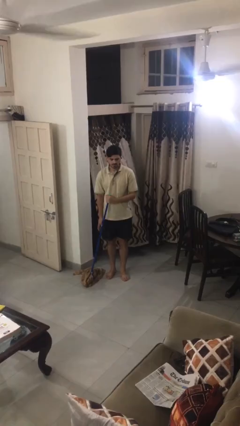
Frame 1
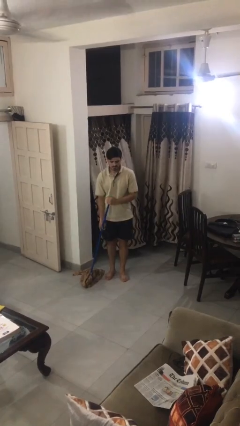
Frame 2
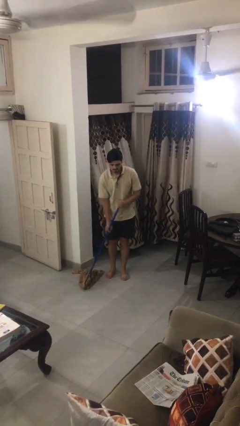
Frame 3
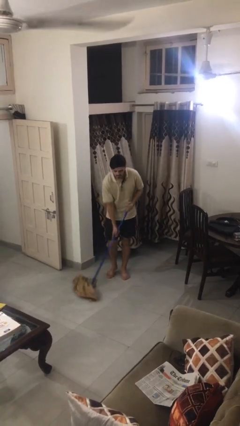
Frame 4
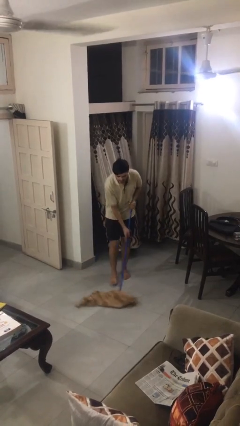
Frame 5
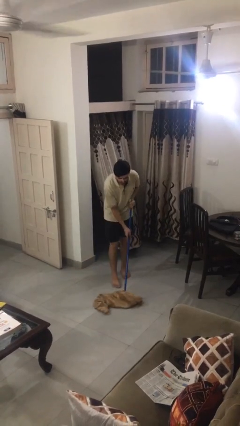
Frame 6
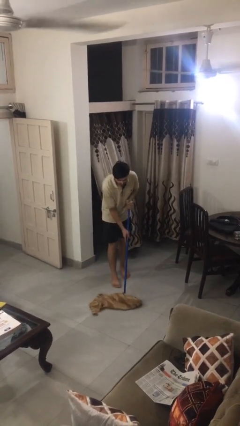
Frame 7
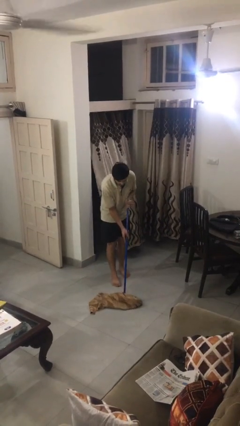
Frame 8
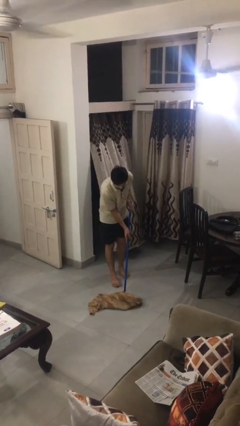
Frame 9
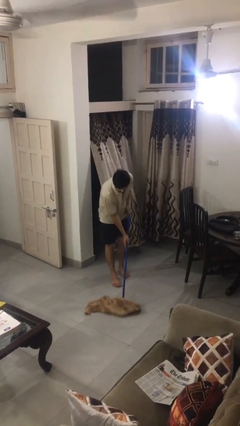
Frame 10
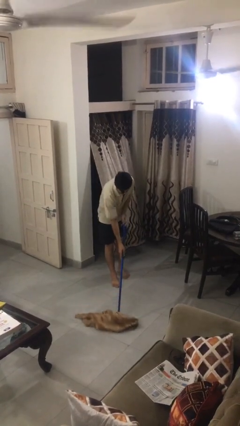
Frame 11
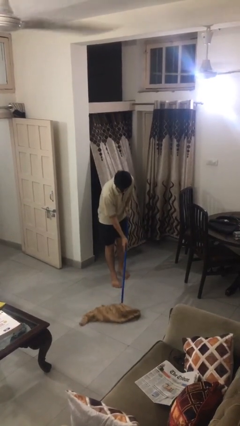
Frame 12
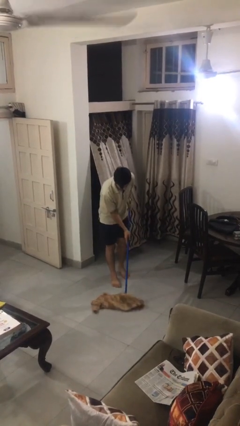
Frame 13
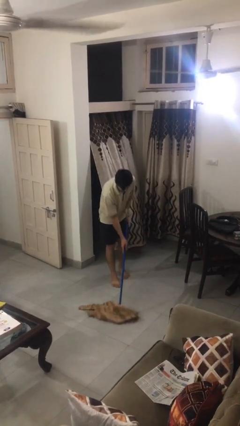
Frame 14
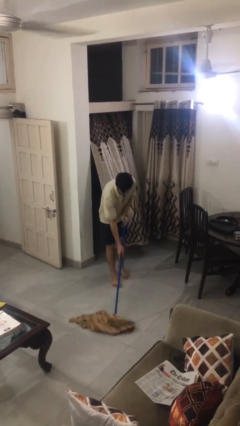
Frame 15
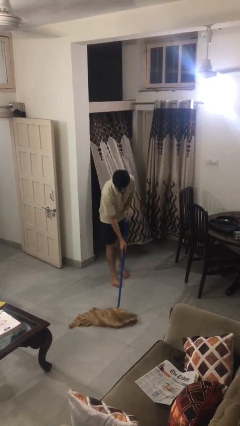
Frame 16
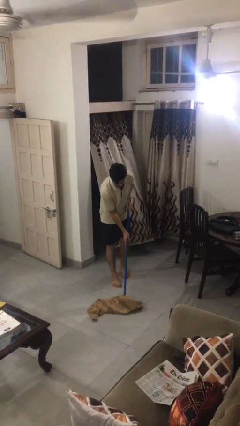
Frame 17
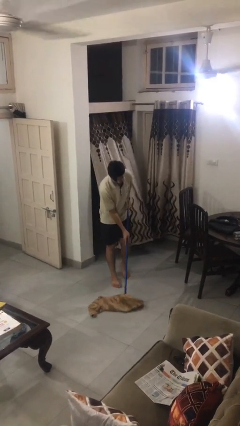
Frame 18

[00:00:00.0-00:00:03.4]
person mops

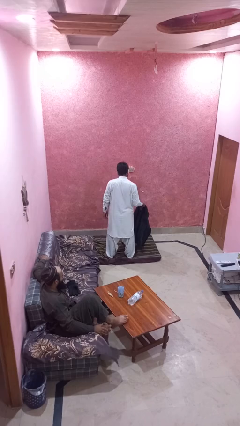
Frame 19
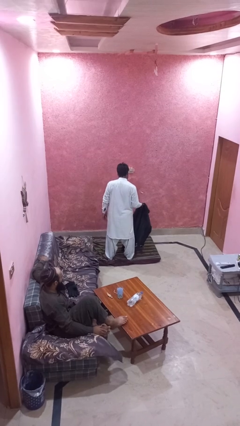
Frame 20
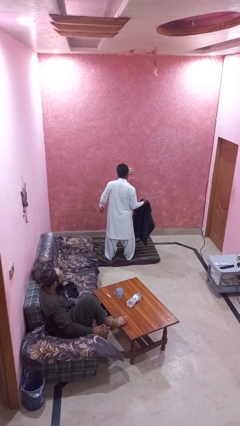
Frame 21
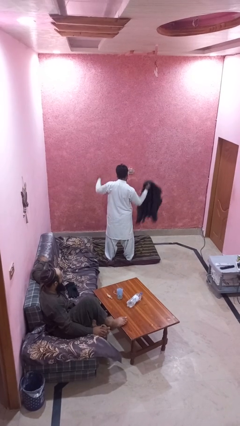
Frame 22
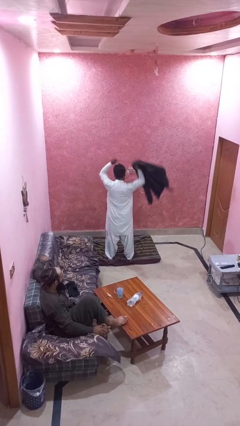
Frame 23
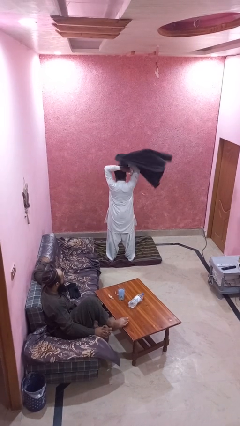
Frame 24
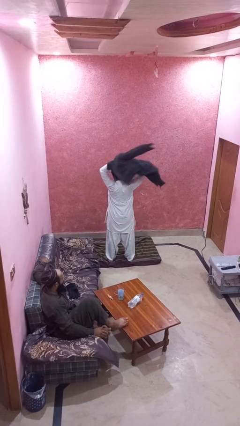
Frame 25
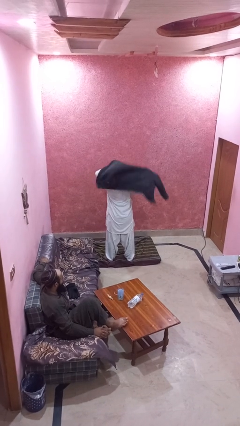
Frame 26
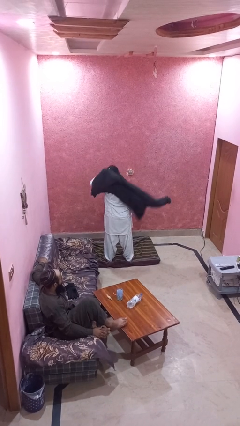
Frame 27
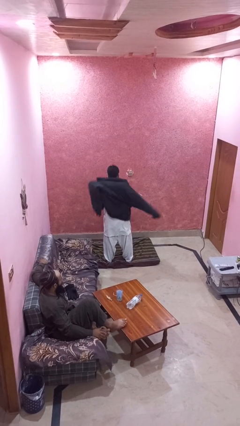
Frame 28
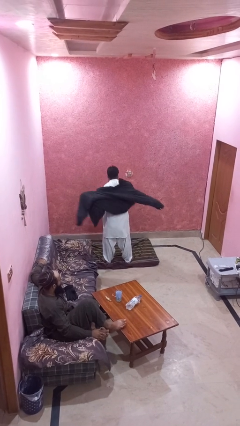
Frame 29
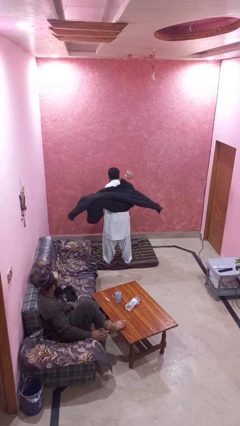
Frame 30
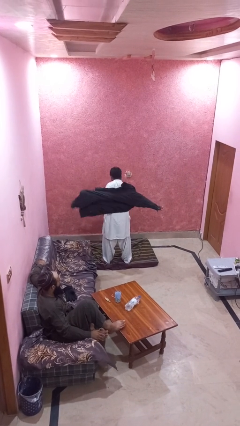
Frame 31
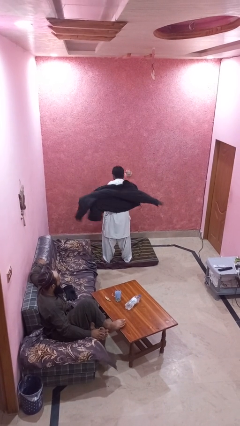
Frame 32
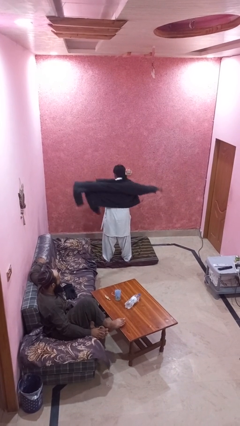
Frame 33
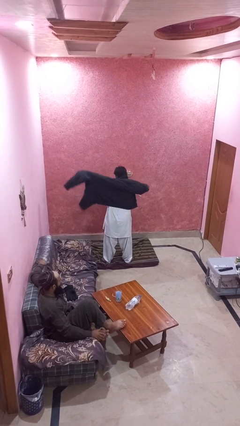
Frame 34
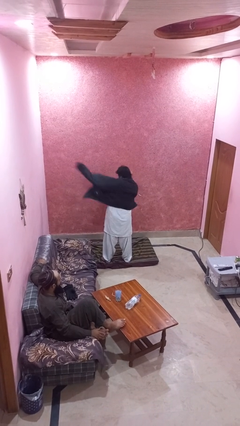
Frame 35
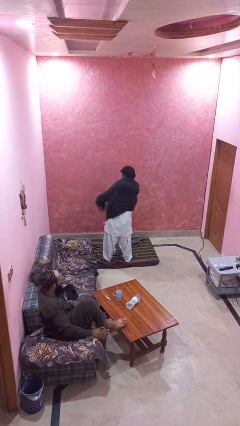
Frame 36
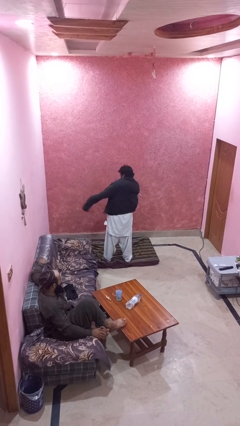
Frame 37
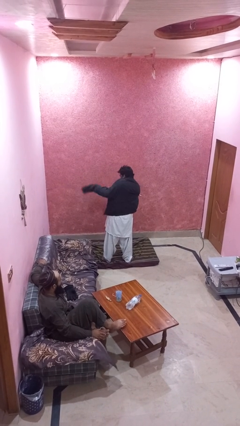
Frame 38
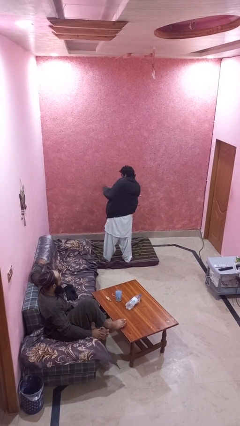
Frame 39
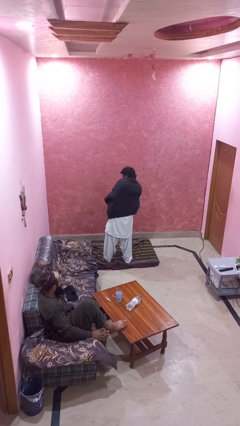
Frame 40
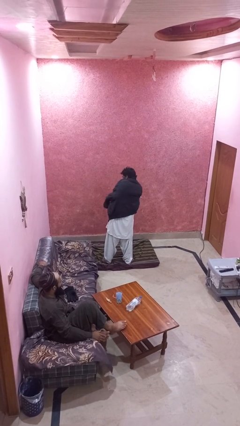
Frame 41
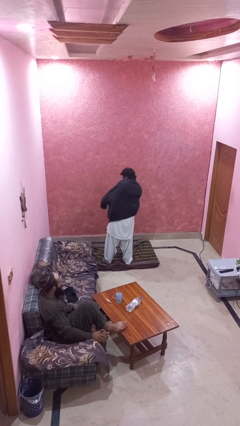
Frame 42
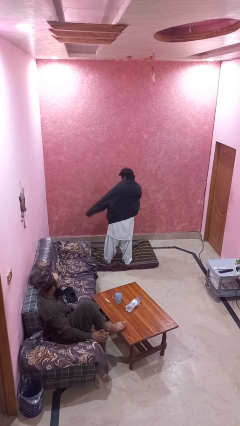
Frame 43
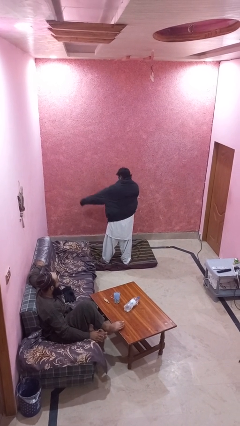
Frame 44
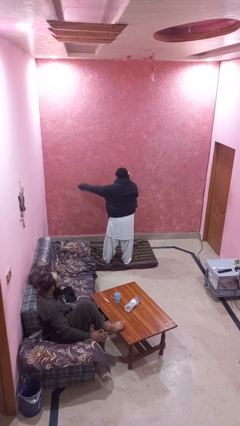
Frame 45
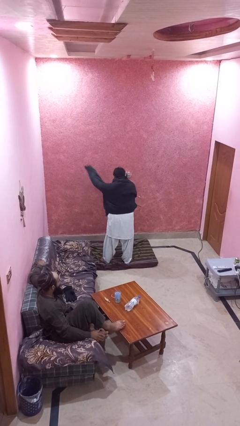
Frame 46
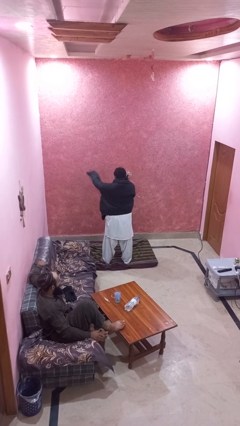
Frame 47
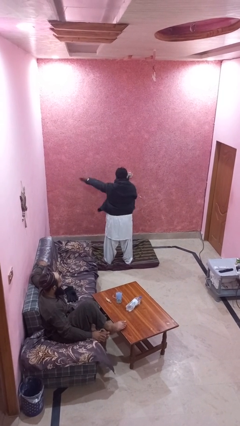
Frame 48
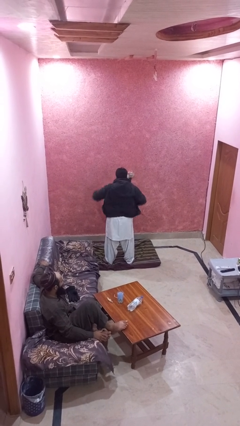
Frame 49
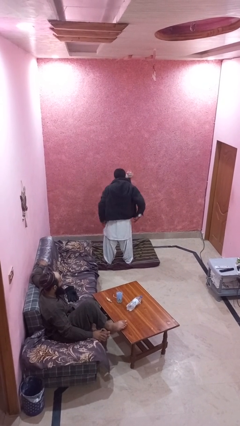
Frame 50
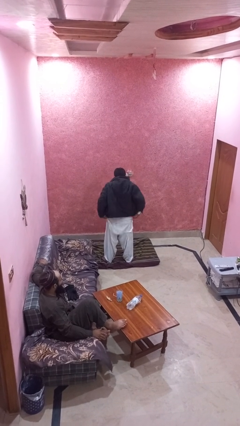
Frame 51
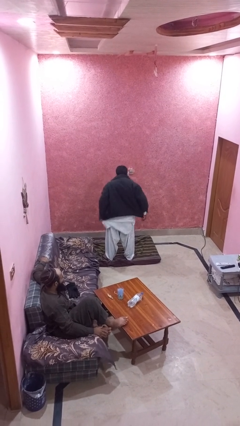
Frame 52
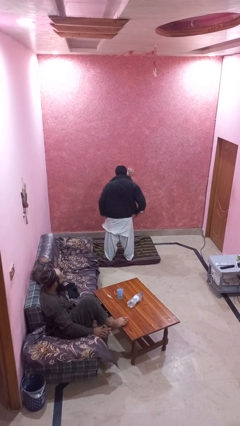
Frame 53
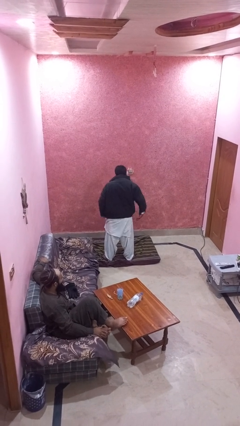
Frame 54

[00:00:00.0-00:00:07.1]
person puts on jacket

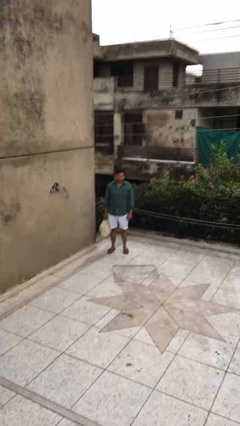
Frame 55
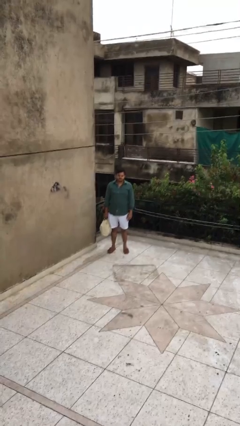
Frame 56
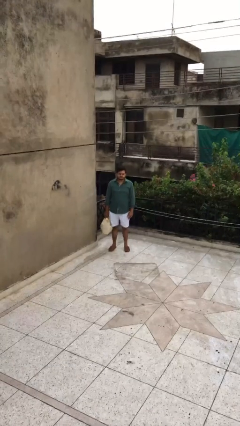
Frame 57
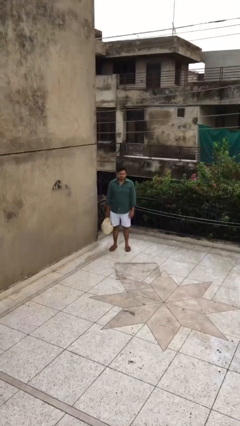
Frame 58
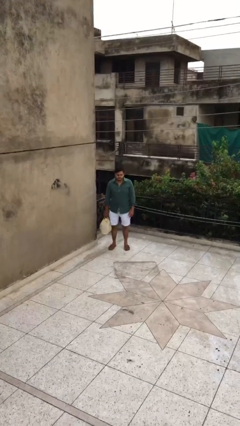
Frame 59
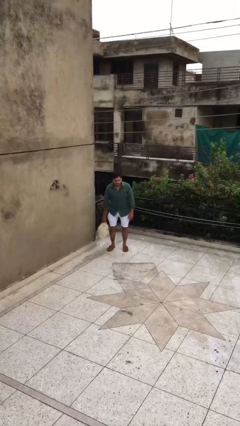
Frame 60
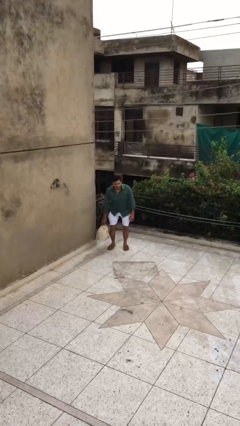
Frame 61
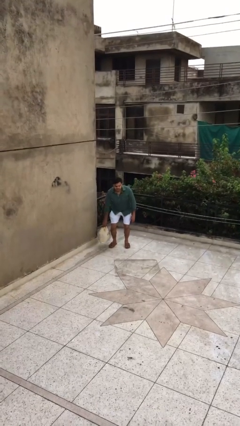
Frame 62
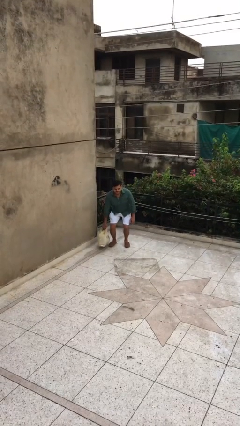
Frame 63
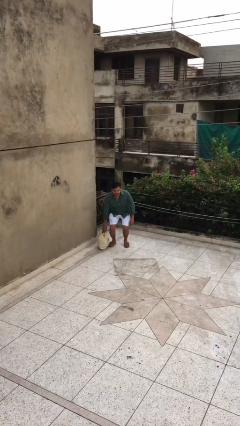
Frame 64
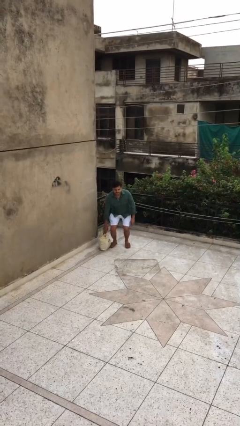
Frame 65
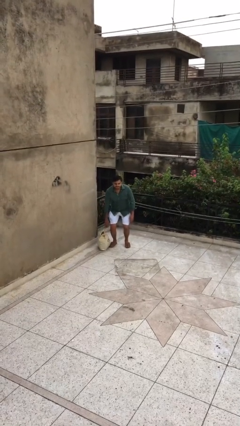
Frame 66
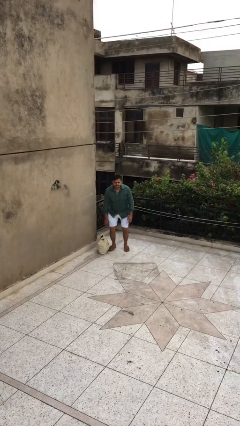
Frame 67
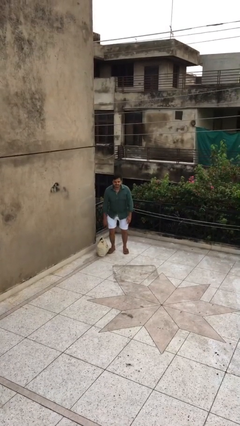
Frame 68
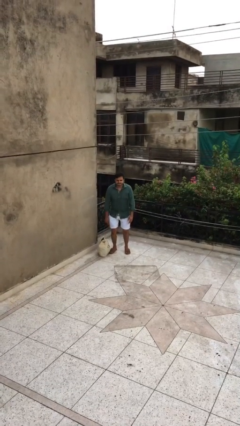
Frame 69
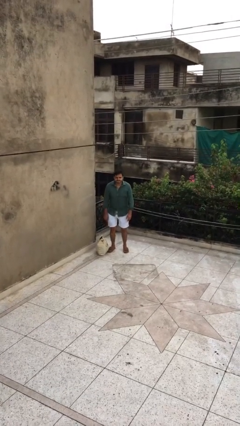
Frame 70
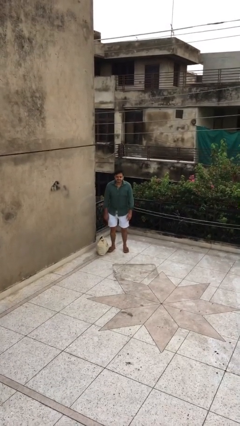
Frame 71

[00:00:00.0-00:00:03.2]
person puts down object on floor

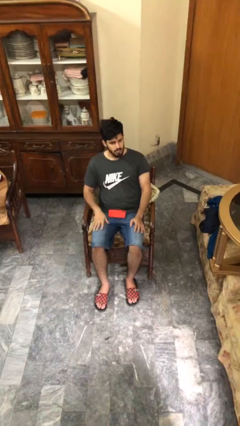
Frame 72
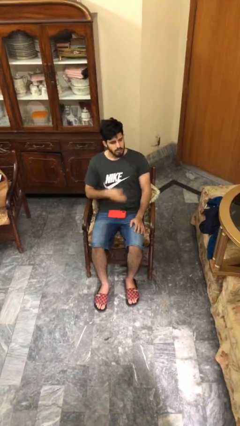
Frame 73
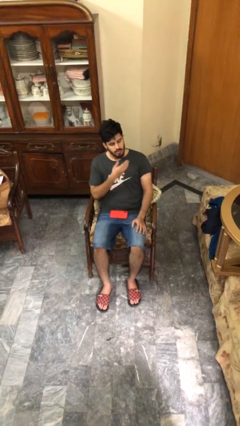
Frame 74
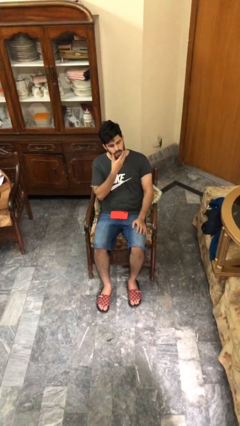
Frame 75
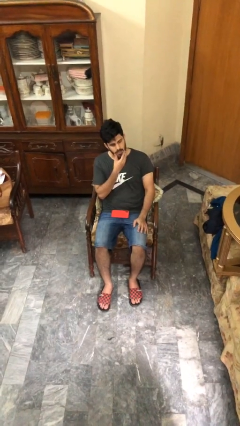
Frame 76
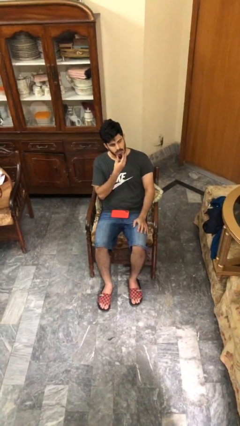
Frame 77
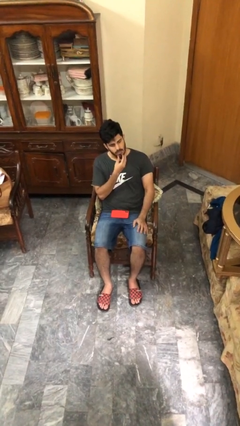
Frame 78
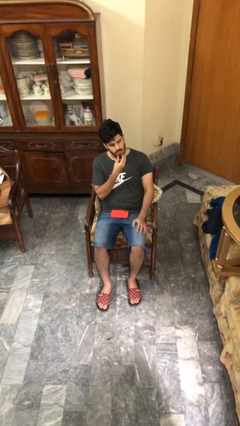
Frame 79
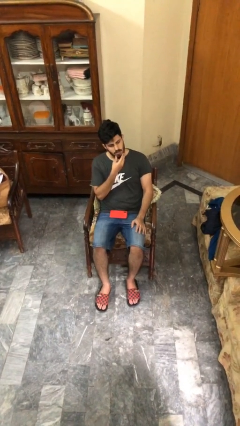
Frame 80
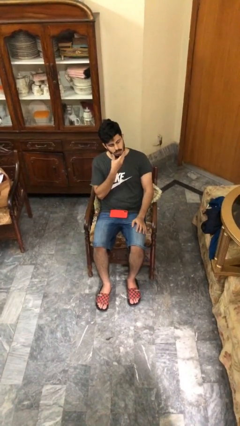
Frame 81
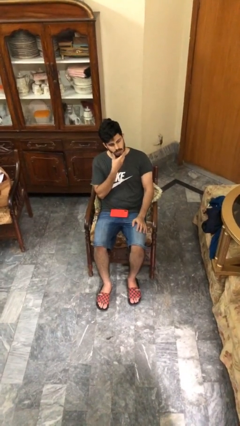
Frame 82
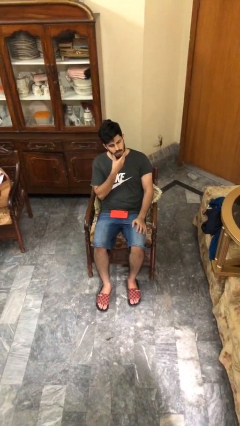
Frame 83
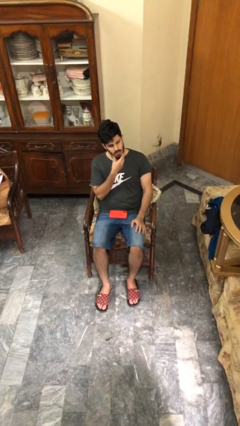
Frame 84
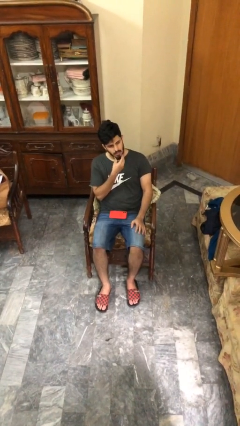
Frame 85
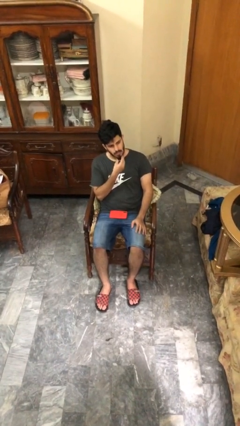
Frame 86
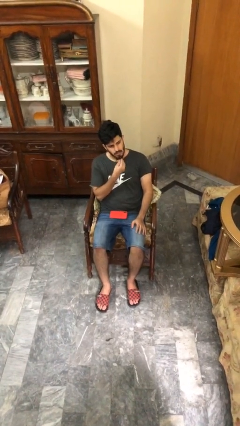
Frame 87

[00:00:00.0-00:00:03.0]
person strokes chin

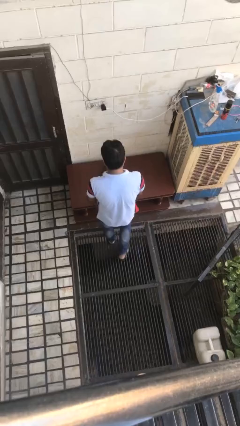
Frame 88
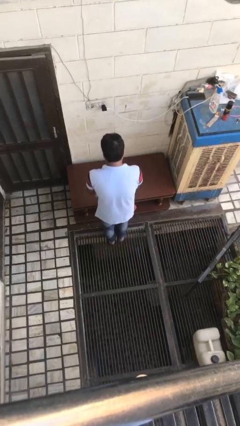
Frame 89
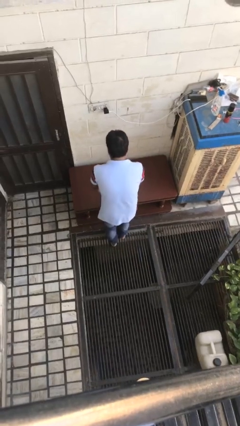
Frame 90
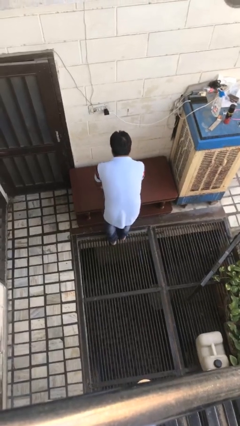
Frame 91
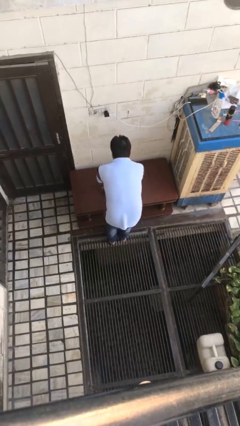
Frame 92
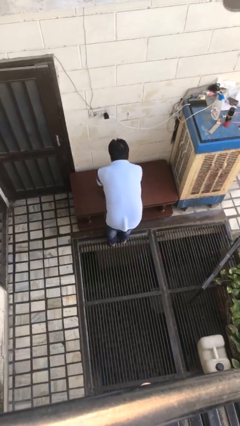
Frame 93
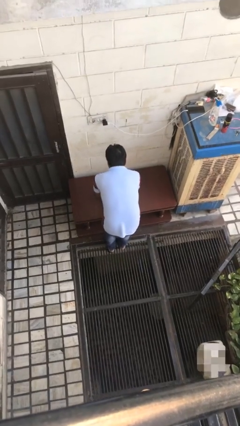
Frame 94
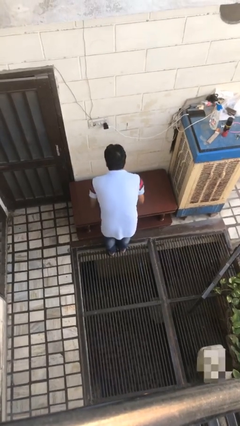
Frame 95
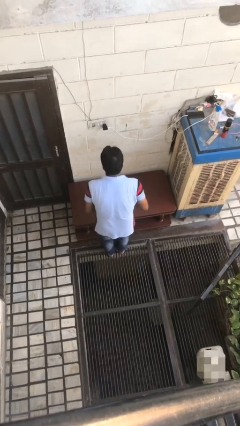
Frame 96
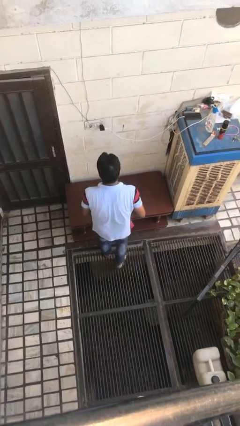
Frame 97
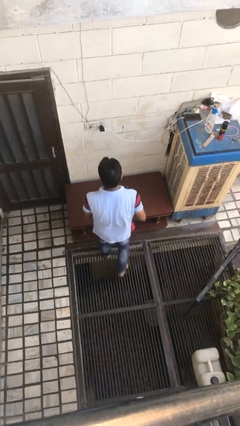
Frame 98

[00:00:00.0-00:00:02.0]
person picks up object from table
